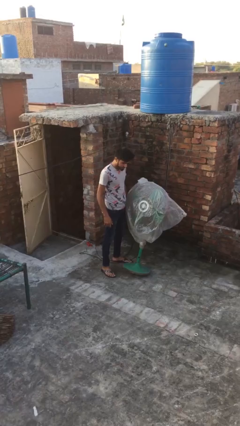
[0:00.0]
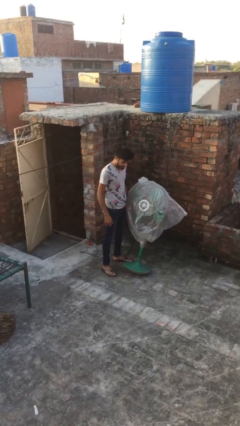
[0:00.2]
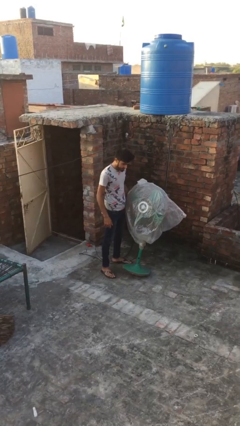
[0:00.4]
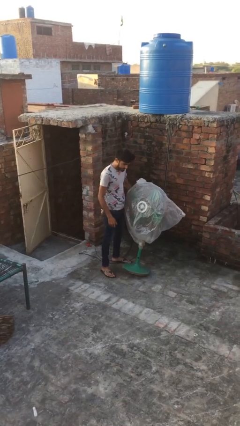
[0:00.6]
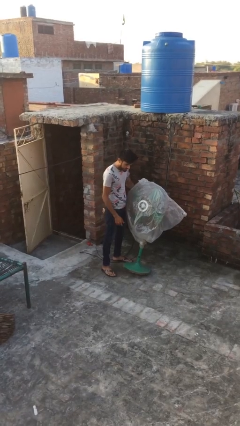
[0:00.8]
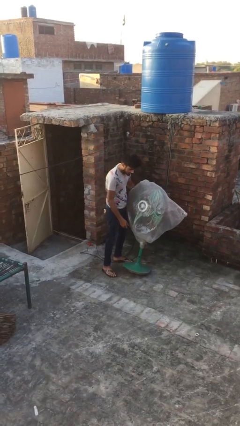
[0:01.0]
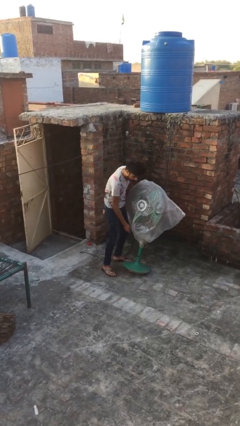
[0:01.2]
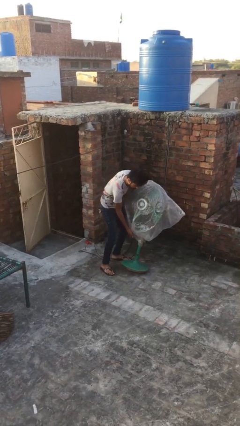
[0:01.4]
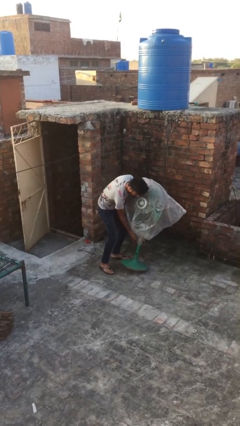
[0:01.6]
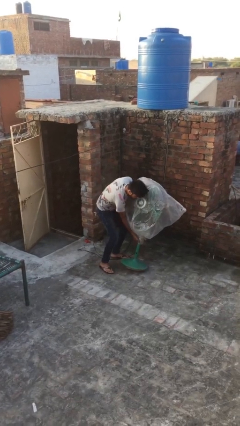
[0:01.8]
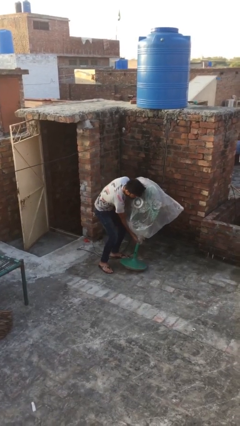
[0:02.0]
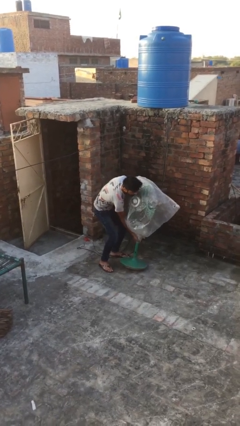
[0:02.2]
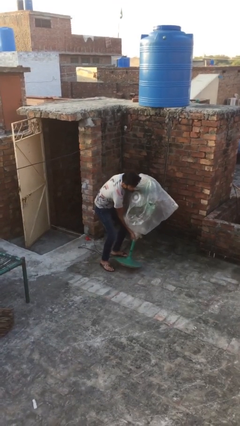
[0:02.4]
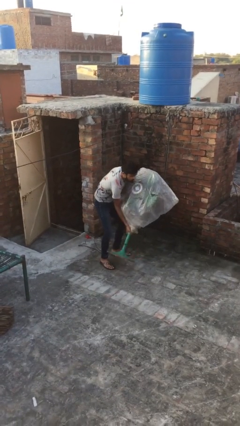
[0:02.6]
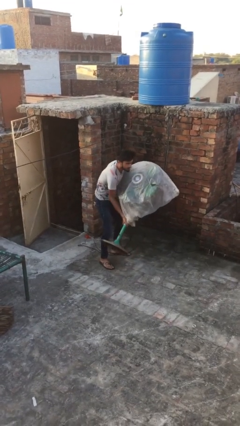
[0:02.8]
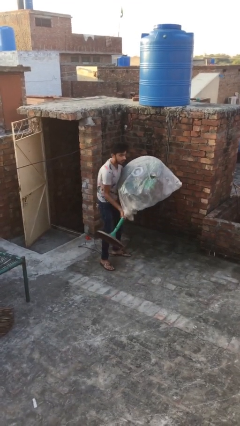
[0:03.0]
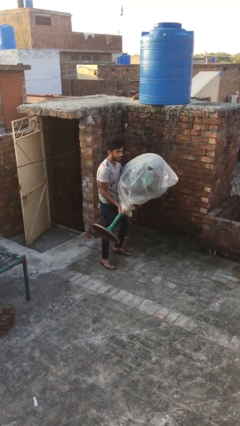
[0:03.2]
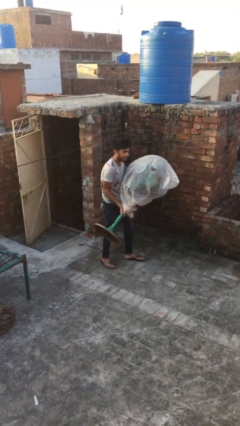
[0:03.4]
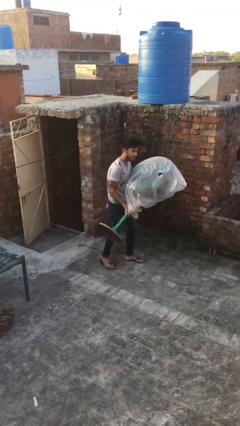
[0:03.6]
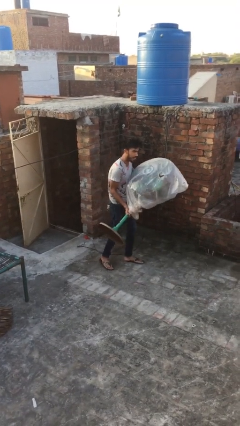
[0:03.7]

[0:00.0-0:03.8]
person picks up object from floor

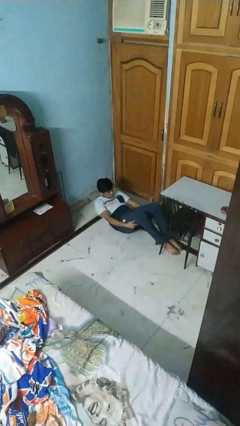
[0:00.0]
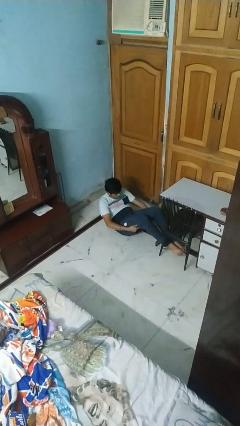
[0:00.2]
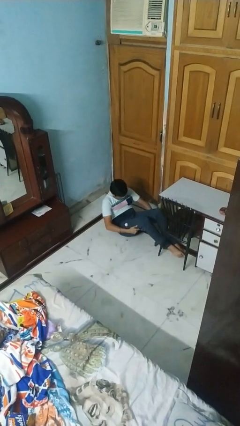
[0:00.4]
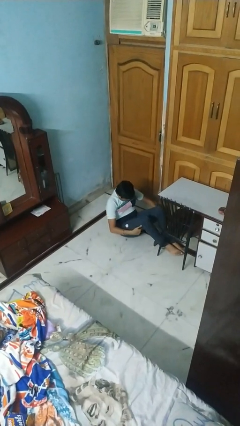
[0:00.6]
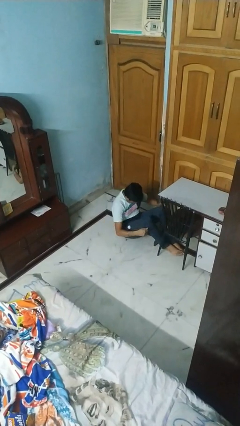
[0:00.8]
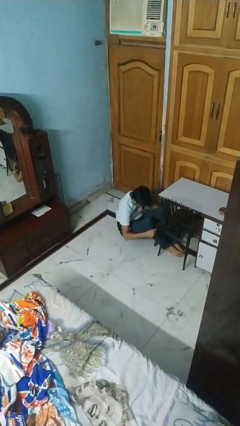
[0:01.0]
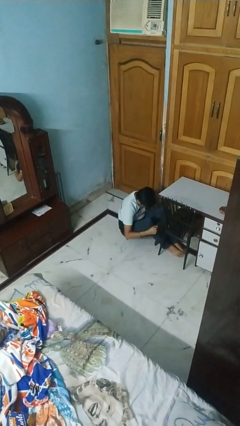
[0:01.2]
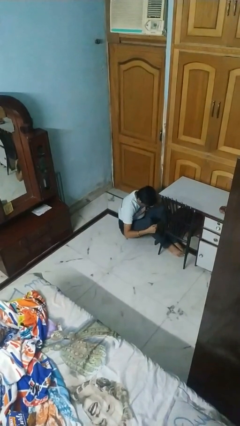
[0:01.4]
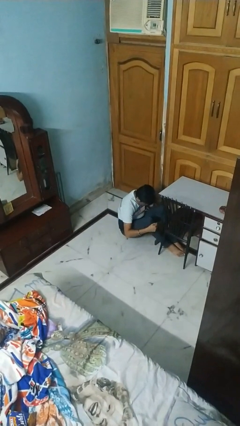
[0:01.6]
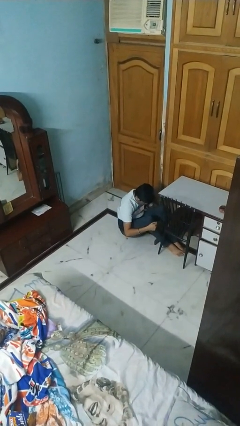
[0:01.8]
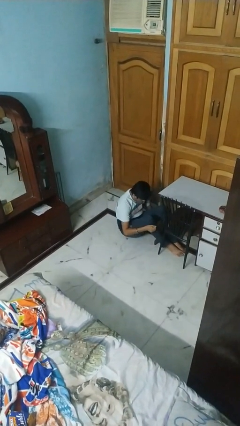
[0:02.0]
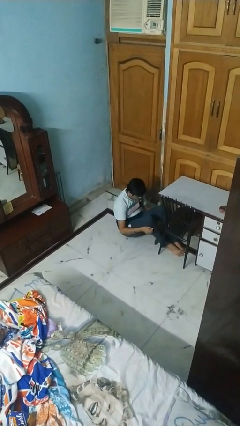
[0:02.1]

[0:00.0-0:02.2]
person exercises with situp

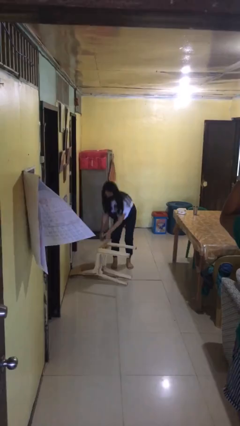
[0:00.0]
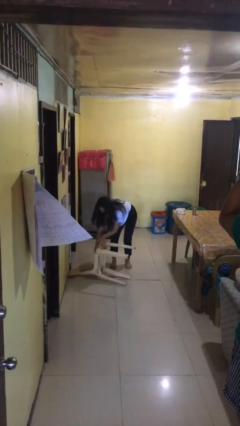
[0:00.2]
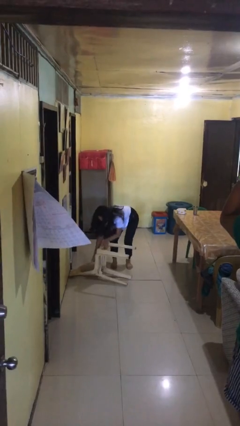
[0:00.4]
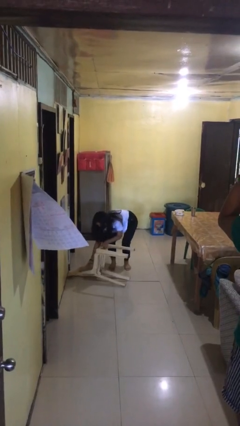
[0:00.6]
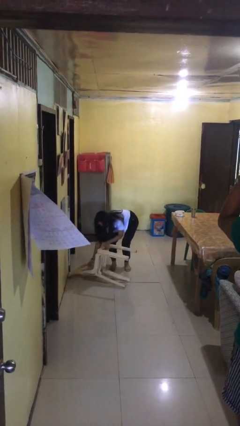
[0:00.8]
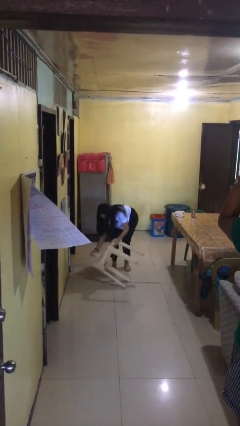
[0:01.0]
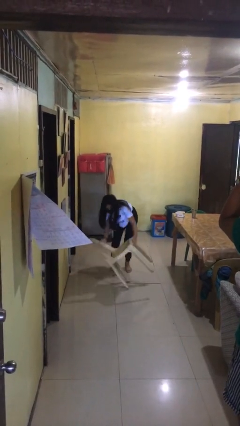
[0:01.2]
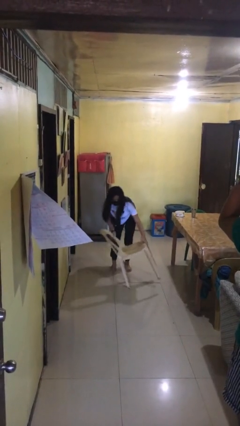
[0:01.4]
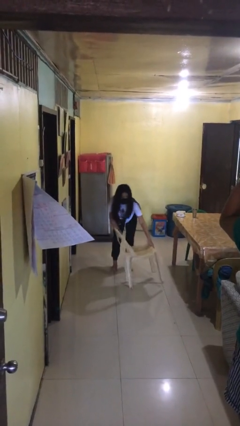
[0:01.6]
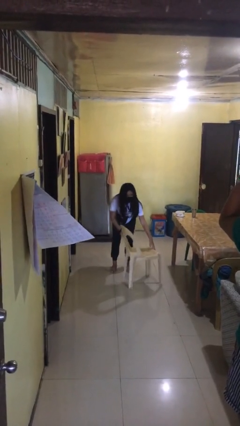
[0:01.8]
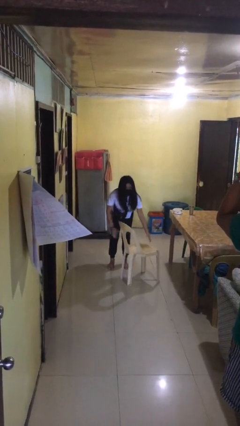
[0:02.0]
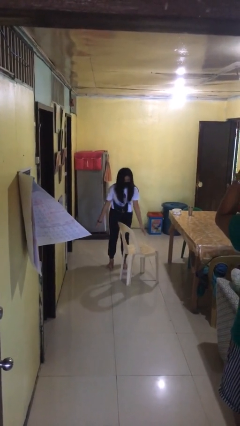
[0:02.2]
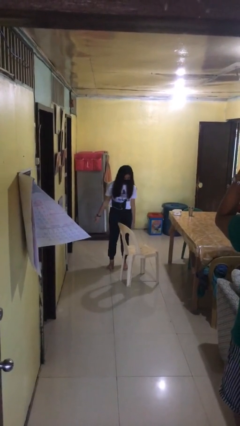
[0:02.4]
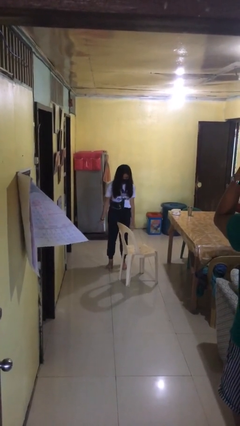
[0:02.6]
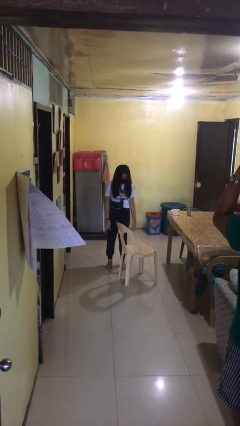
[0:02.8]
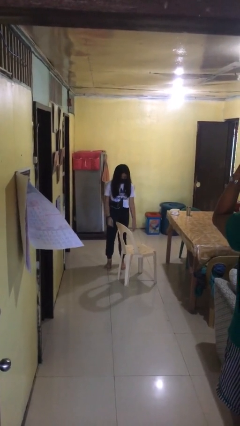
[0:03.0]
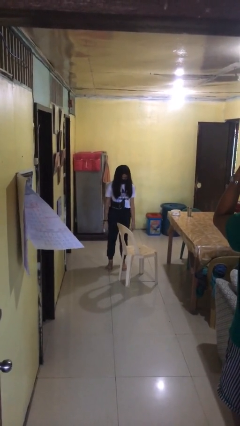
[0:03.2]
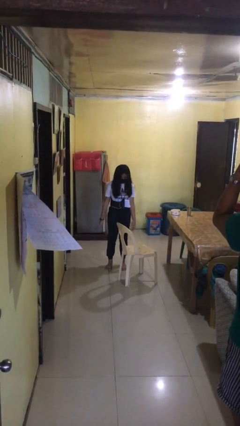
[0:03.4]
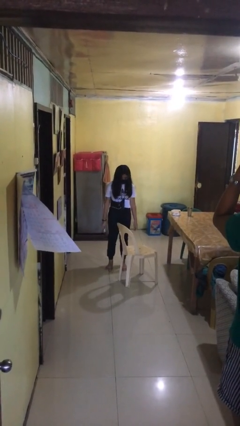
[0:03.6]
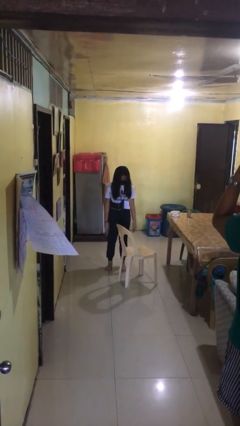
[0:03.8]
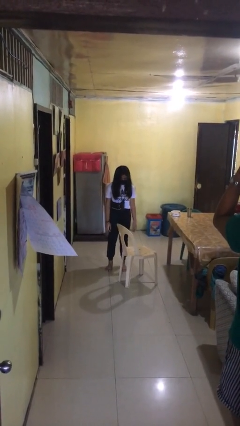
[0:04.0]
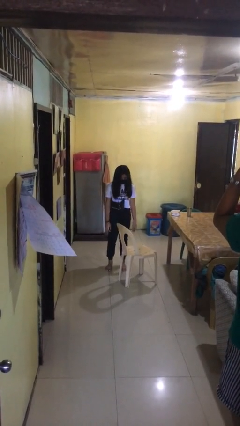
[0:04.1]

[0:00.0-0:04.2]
person sets upright furniture

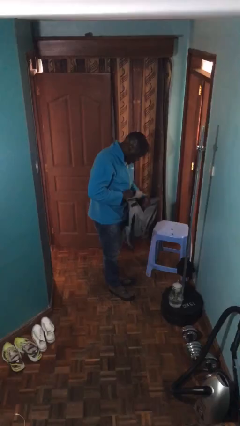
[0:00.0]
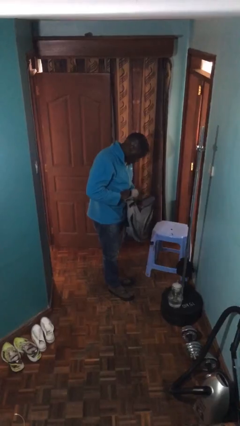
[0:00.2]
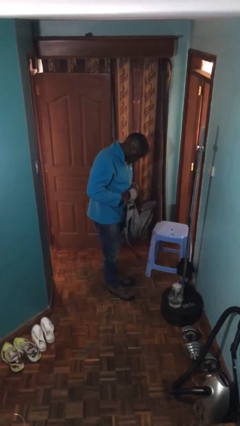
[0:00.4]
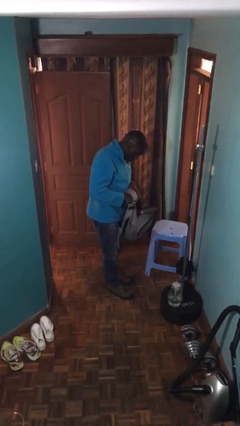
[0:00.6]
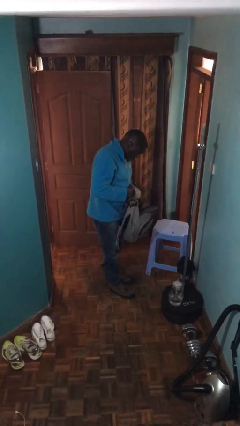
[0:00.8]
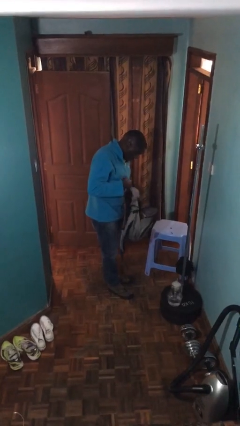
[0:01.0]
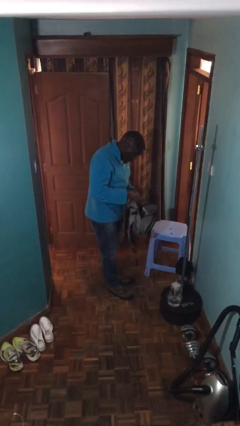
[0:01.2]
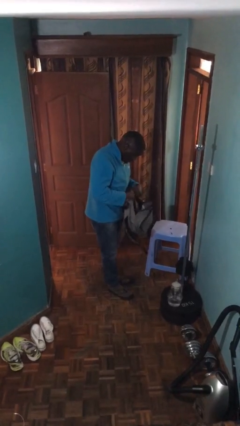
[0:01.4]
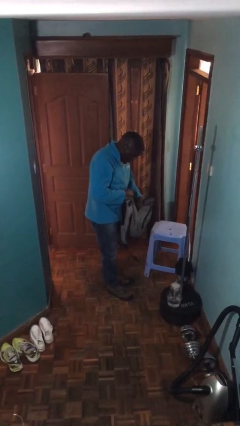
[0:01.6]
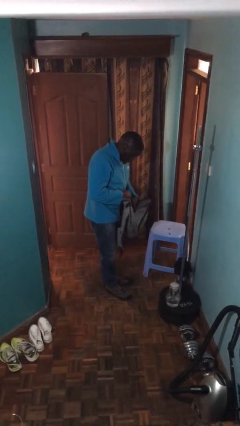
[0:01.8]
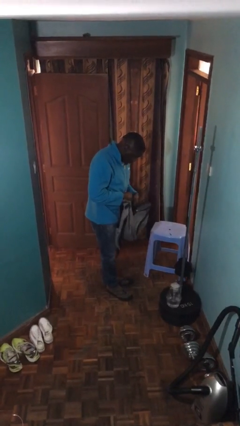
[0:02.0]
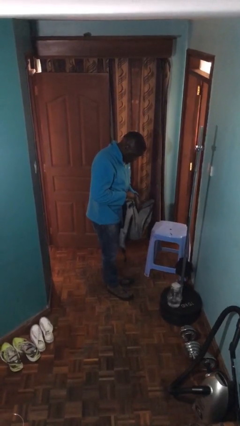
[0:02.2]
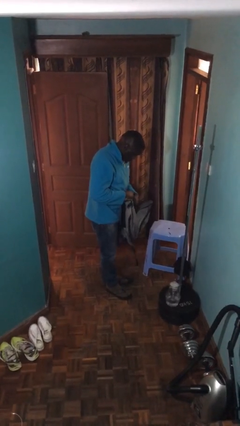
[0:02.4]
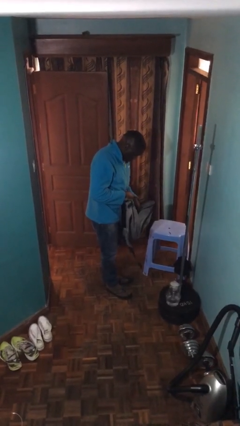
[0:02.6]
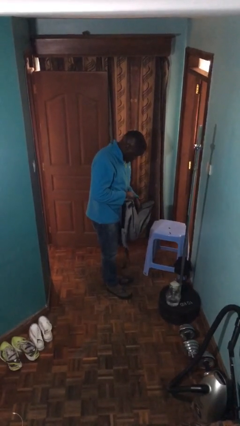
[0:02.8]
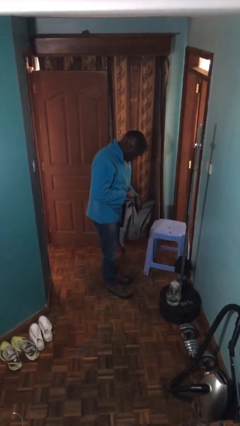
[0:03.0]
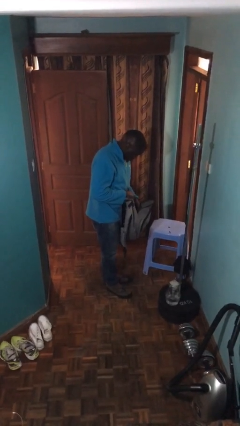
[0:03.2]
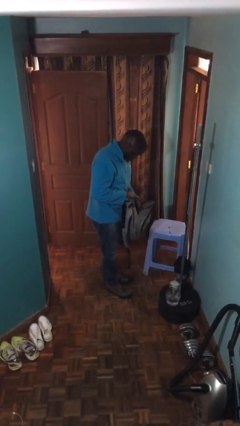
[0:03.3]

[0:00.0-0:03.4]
person searches in backpack

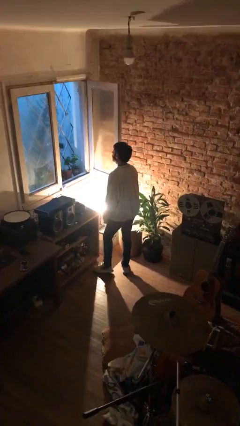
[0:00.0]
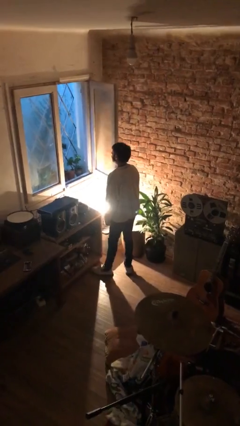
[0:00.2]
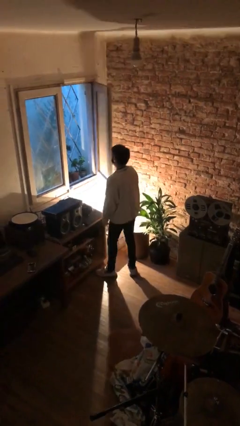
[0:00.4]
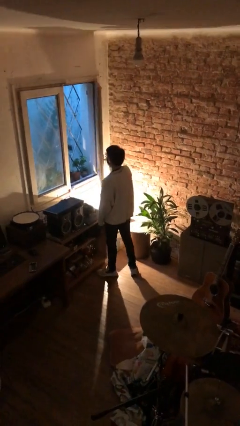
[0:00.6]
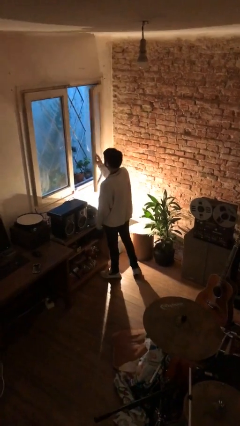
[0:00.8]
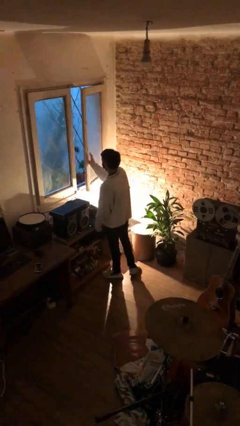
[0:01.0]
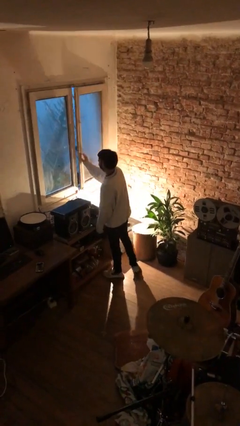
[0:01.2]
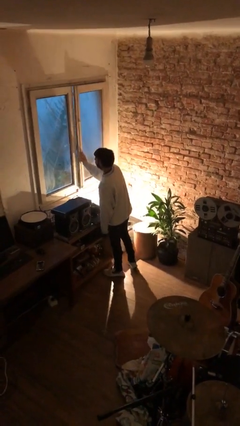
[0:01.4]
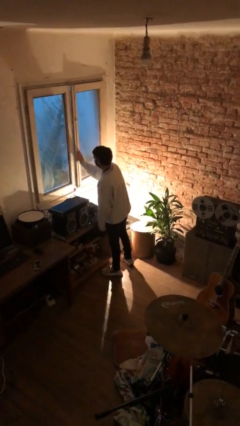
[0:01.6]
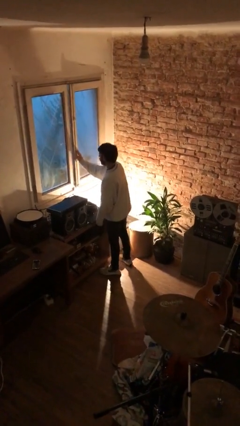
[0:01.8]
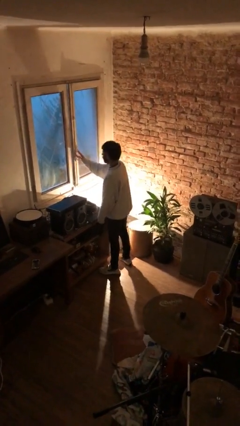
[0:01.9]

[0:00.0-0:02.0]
person closes home window

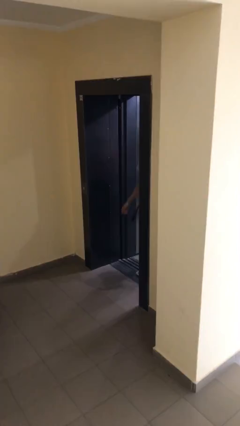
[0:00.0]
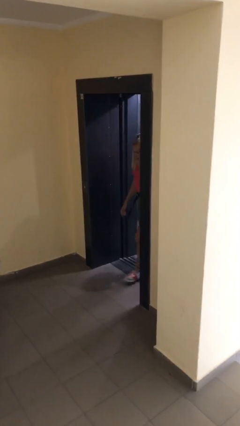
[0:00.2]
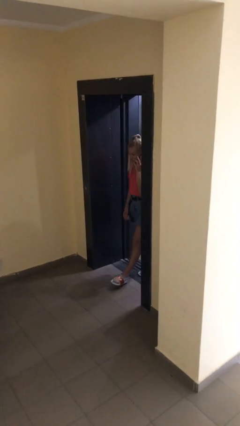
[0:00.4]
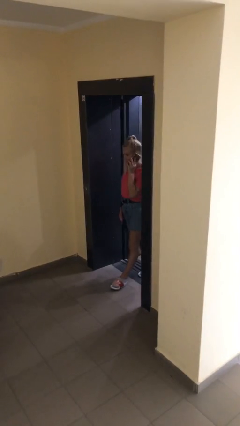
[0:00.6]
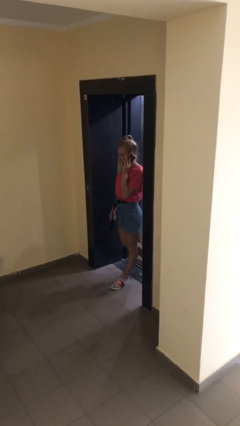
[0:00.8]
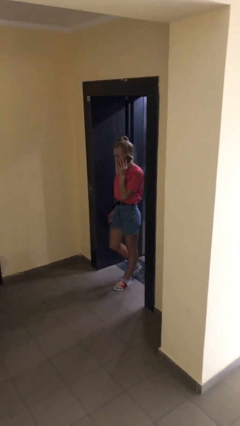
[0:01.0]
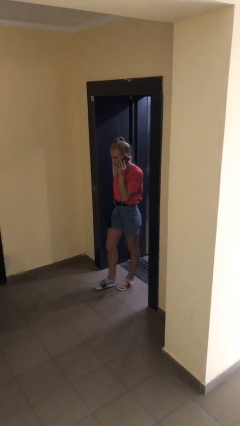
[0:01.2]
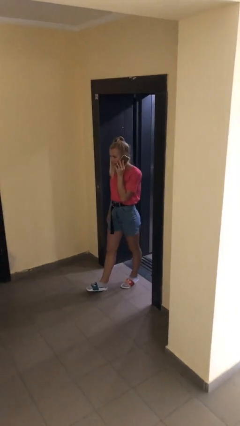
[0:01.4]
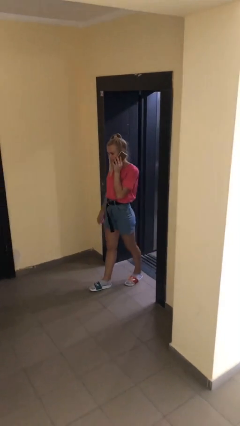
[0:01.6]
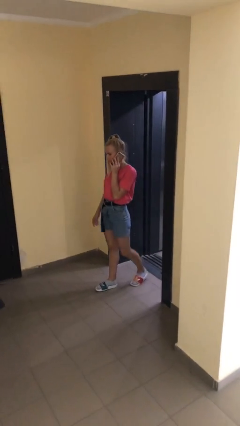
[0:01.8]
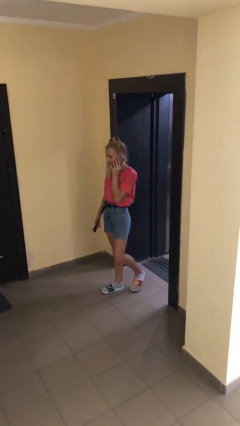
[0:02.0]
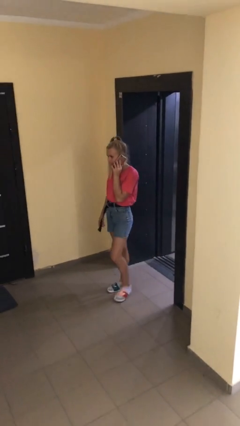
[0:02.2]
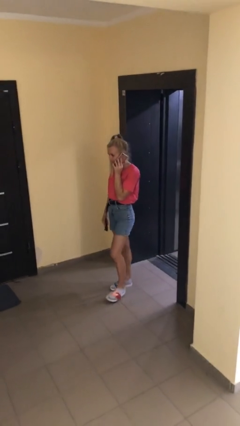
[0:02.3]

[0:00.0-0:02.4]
person enters scene through structure
